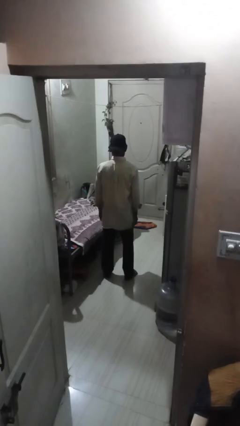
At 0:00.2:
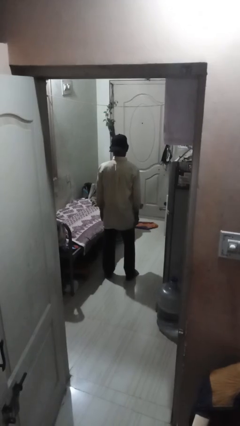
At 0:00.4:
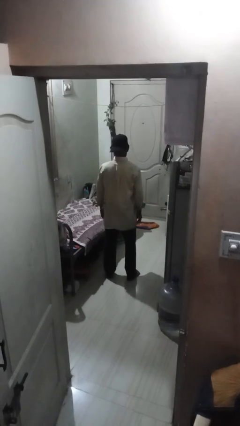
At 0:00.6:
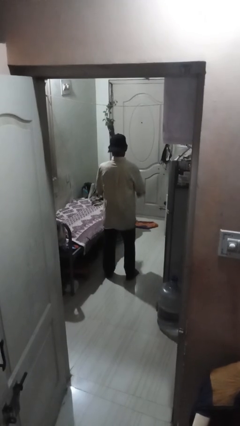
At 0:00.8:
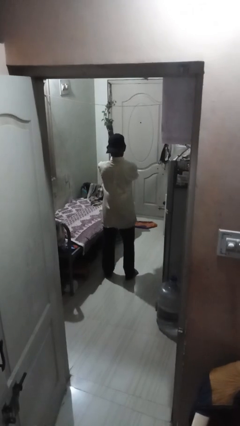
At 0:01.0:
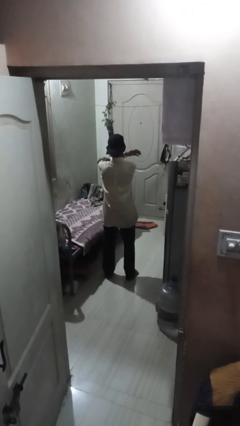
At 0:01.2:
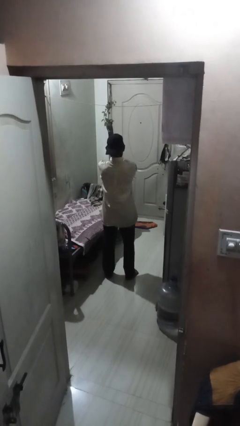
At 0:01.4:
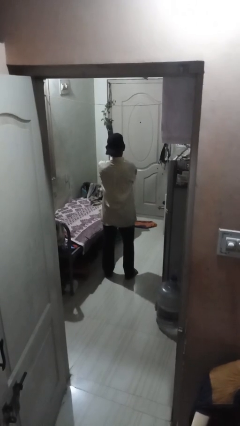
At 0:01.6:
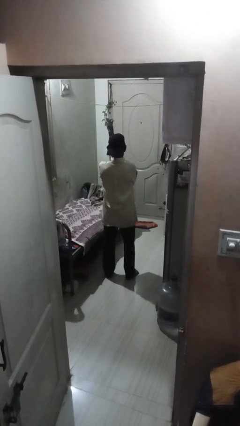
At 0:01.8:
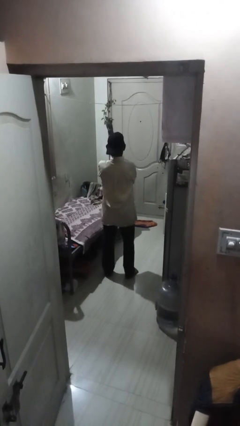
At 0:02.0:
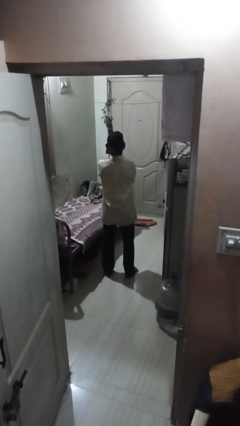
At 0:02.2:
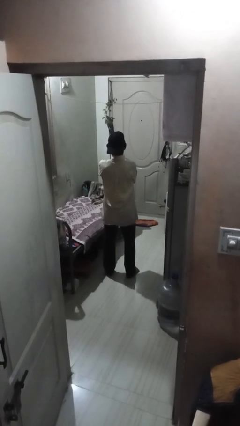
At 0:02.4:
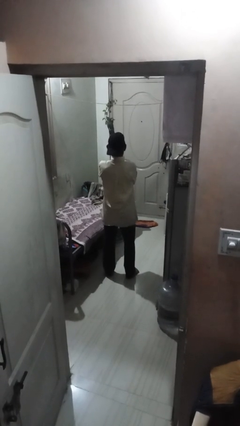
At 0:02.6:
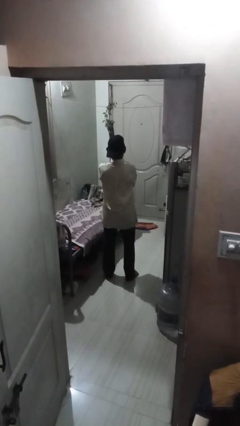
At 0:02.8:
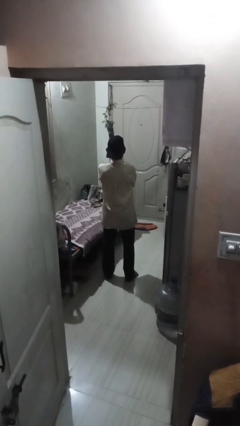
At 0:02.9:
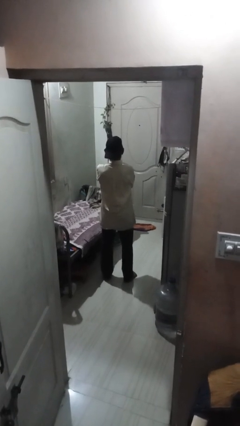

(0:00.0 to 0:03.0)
person crosses arms

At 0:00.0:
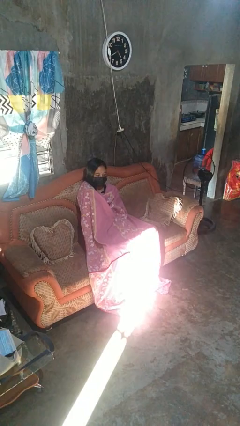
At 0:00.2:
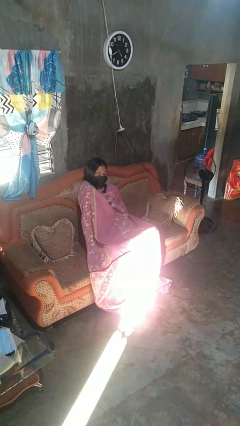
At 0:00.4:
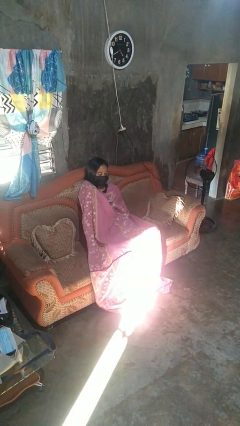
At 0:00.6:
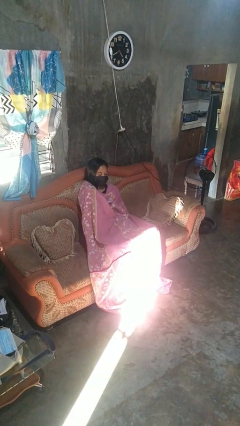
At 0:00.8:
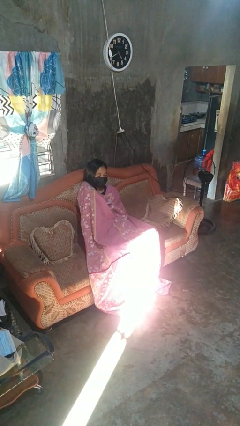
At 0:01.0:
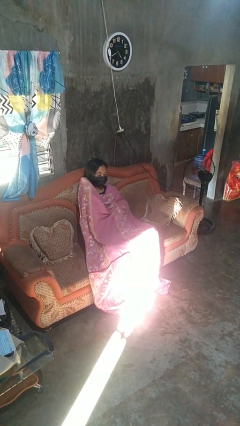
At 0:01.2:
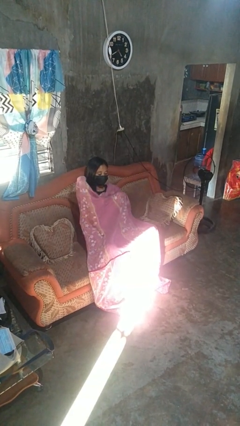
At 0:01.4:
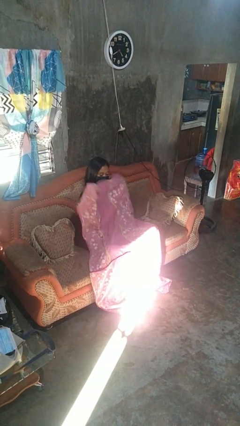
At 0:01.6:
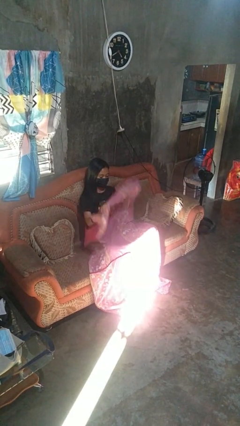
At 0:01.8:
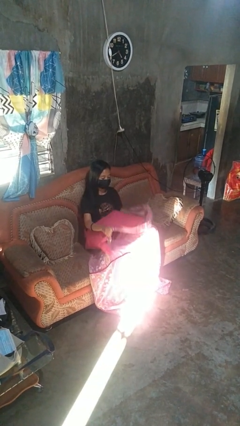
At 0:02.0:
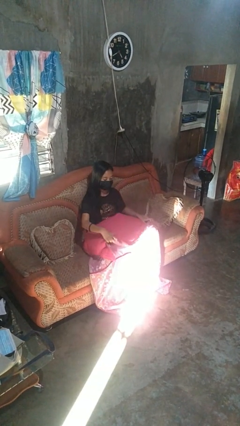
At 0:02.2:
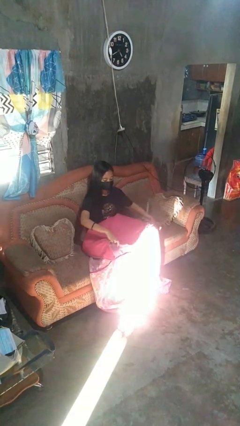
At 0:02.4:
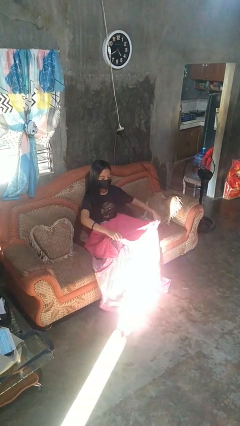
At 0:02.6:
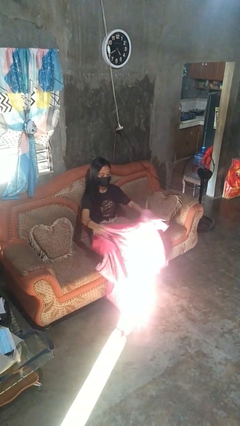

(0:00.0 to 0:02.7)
person uncovers with blanket

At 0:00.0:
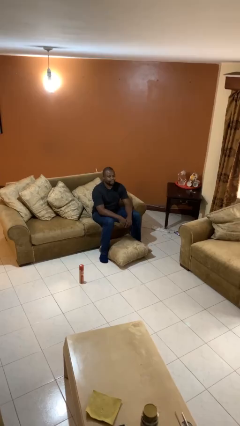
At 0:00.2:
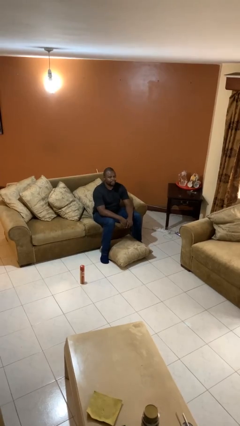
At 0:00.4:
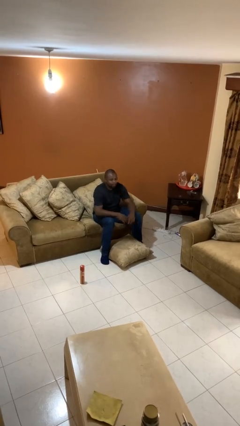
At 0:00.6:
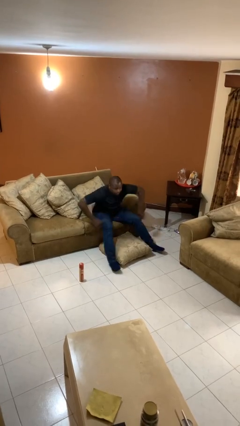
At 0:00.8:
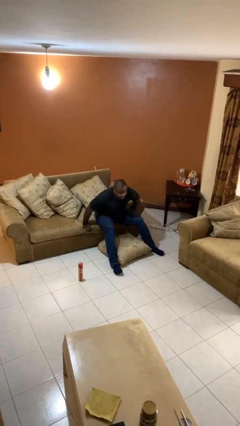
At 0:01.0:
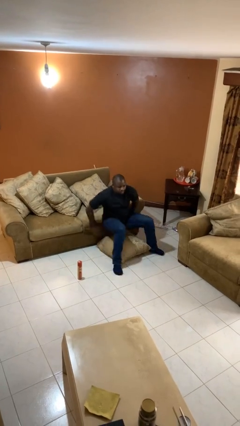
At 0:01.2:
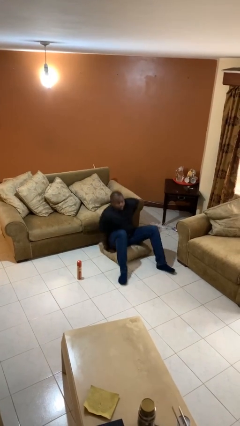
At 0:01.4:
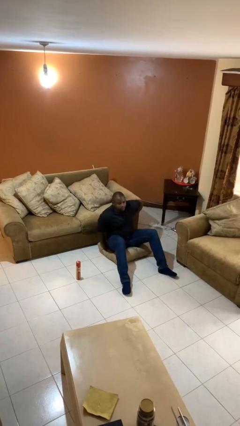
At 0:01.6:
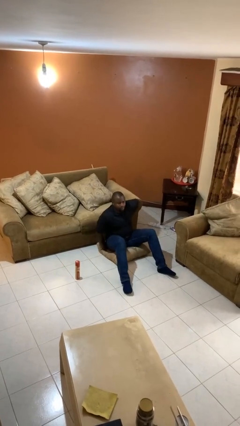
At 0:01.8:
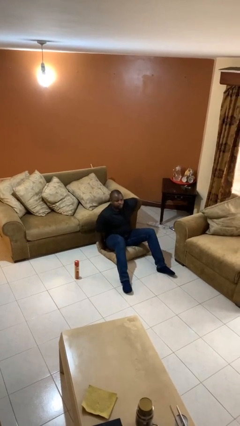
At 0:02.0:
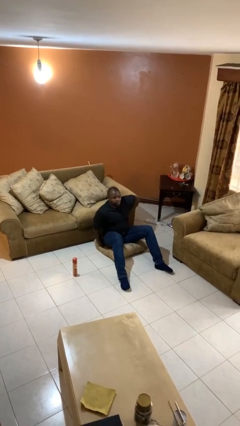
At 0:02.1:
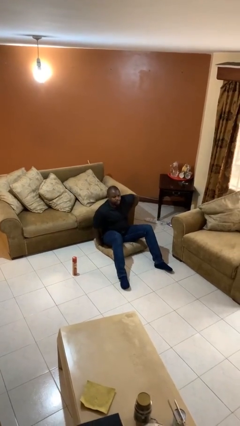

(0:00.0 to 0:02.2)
person falls from chair

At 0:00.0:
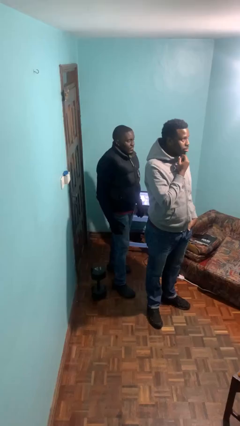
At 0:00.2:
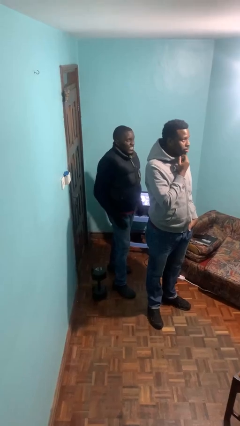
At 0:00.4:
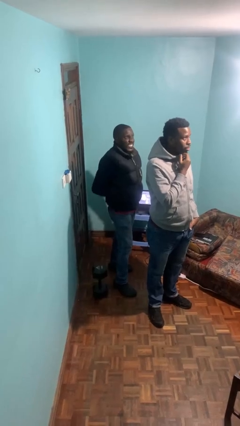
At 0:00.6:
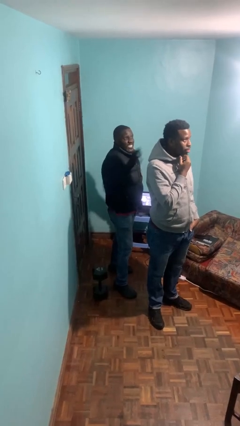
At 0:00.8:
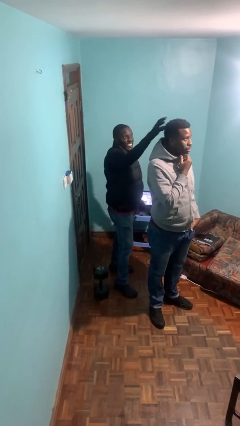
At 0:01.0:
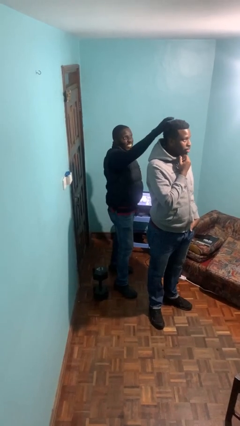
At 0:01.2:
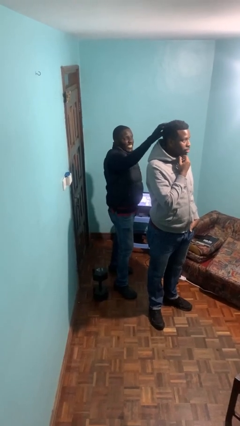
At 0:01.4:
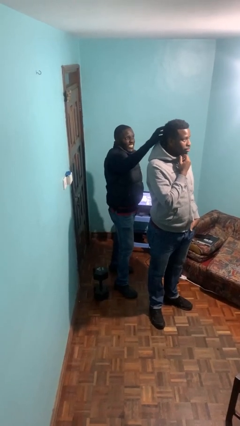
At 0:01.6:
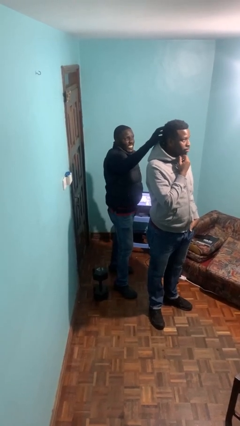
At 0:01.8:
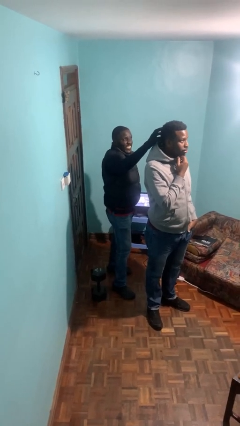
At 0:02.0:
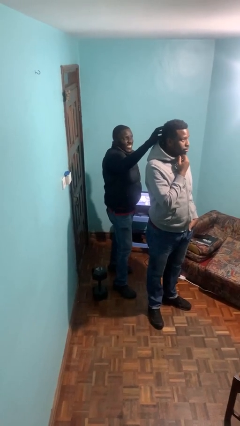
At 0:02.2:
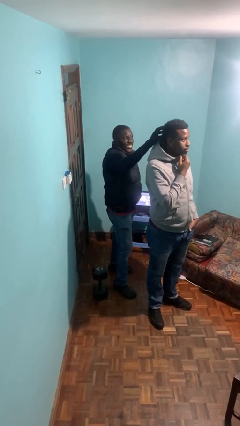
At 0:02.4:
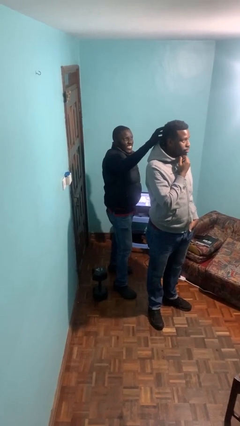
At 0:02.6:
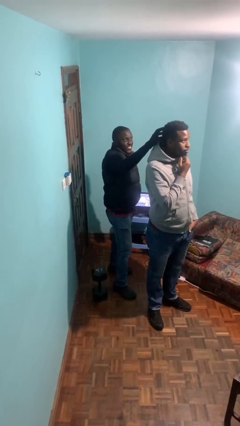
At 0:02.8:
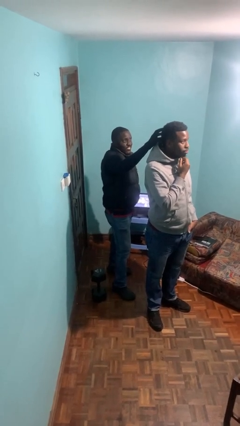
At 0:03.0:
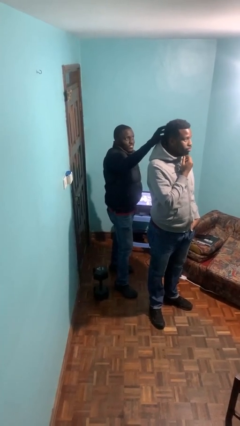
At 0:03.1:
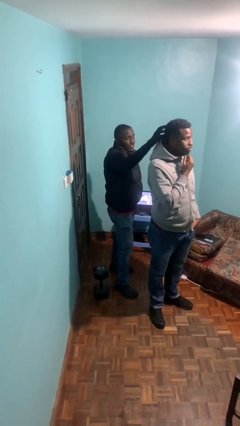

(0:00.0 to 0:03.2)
person grabs person by hair

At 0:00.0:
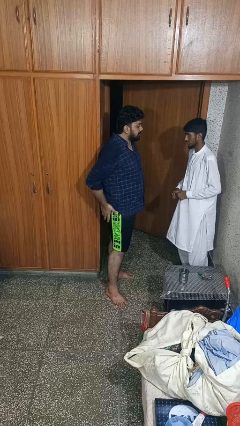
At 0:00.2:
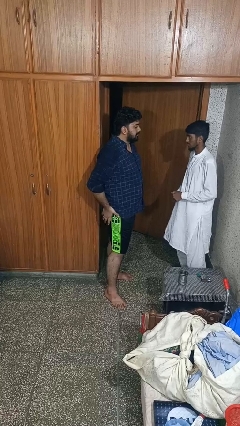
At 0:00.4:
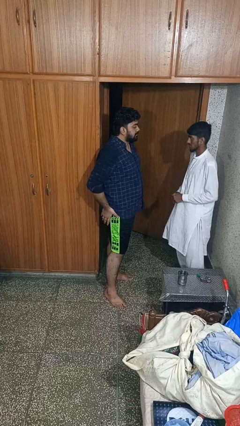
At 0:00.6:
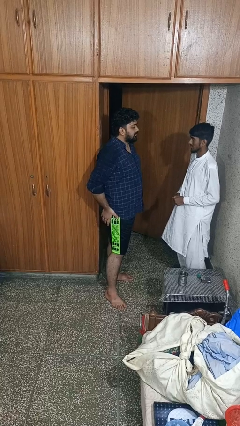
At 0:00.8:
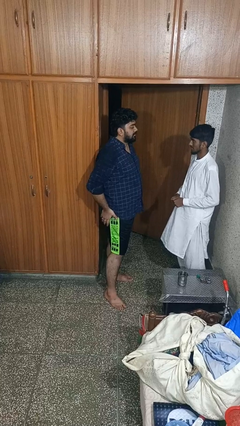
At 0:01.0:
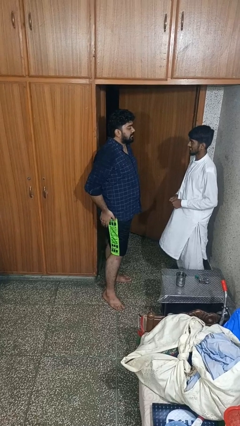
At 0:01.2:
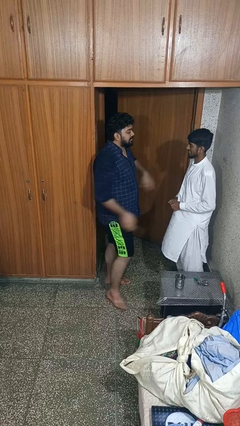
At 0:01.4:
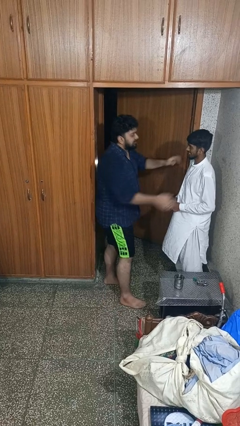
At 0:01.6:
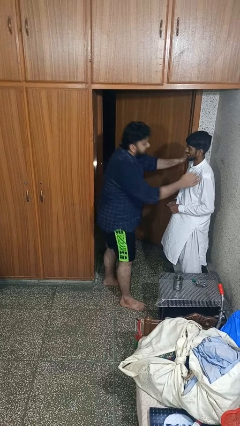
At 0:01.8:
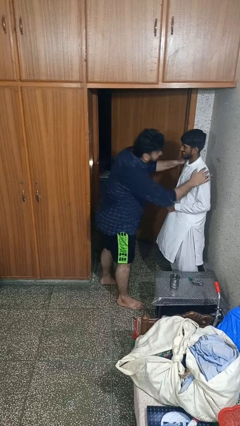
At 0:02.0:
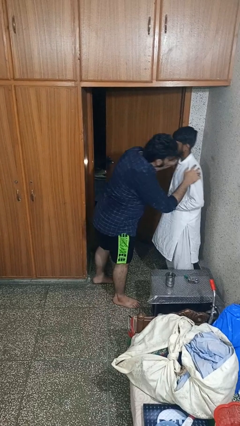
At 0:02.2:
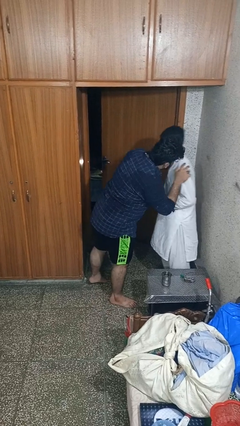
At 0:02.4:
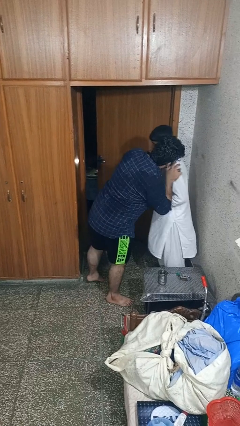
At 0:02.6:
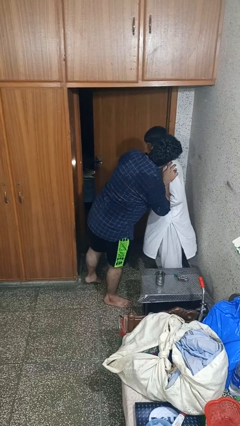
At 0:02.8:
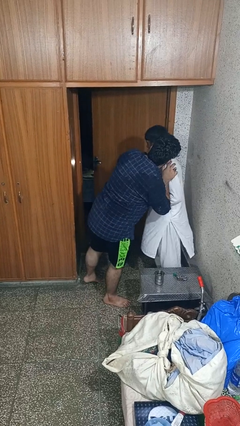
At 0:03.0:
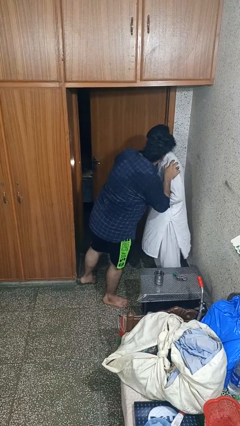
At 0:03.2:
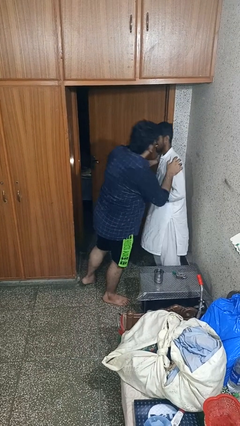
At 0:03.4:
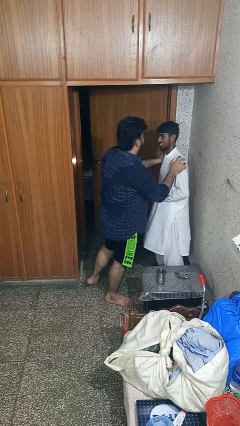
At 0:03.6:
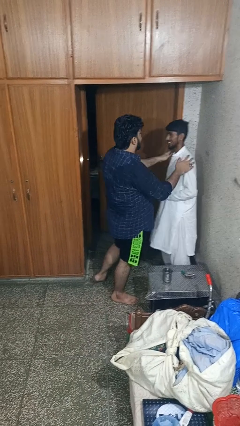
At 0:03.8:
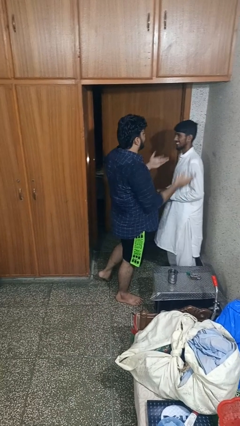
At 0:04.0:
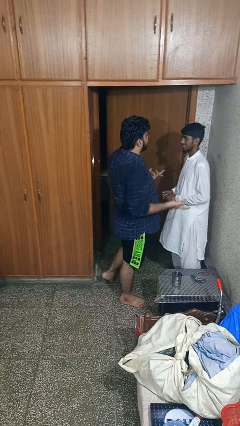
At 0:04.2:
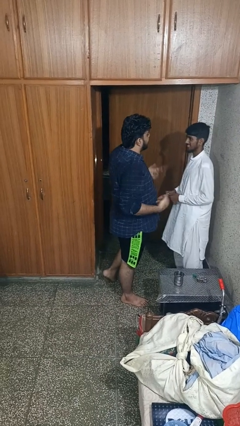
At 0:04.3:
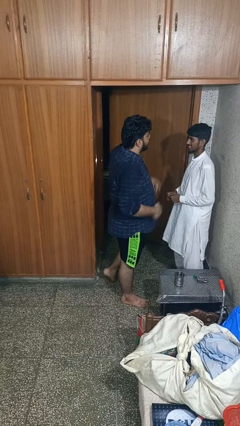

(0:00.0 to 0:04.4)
person kisses cheek of person

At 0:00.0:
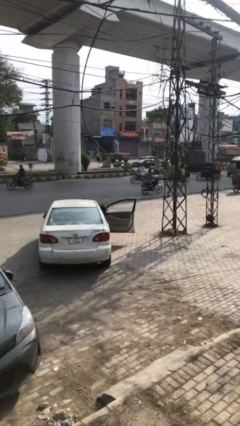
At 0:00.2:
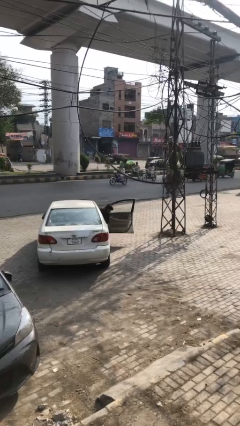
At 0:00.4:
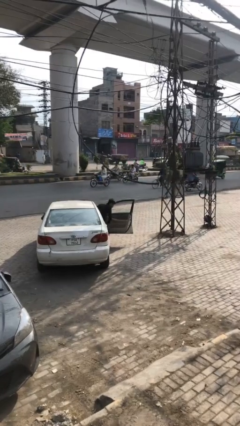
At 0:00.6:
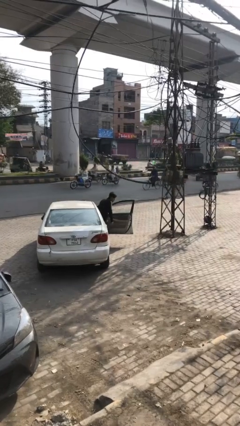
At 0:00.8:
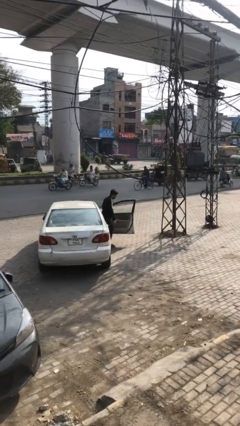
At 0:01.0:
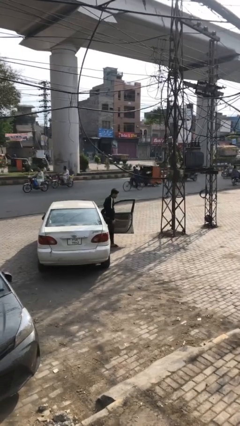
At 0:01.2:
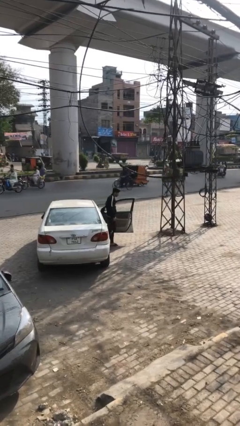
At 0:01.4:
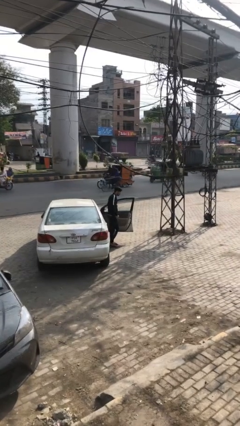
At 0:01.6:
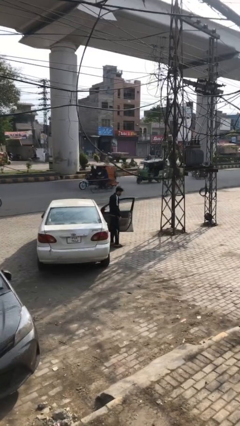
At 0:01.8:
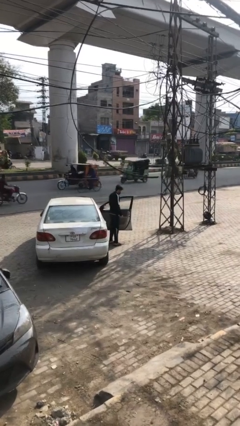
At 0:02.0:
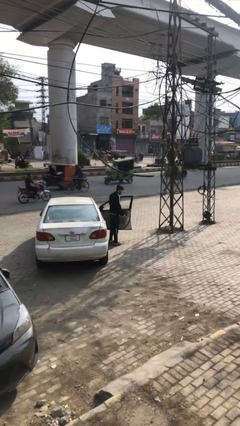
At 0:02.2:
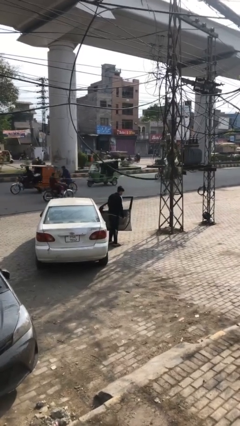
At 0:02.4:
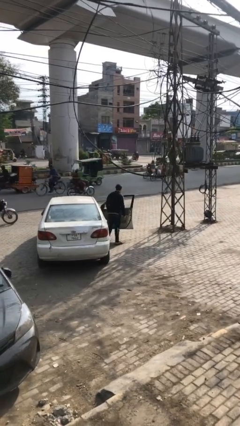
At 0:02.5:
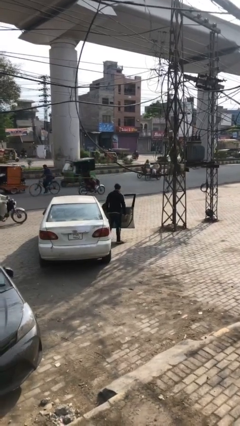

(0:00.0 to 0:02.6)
person exits car
